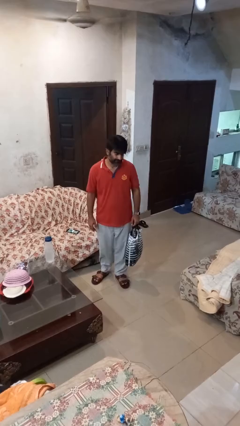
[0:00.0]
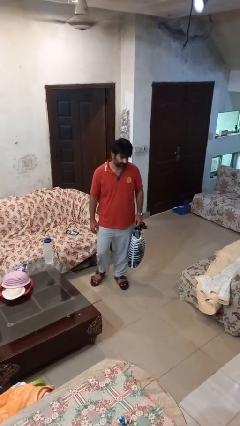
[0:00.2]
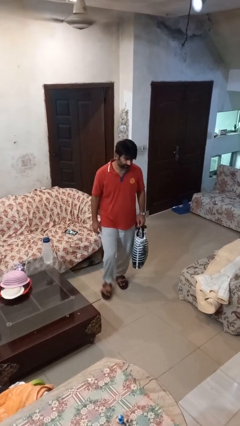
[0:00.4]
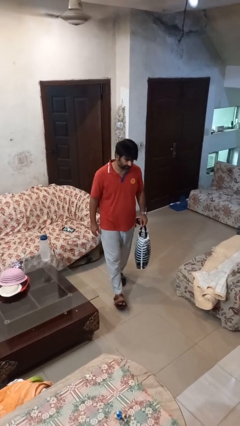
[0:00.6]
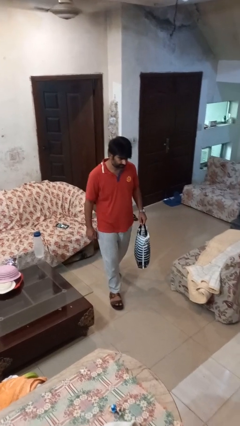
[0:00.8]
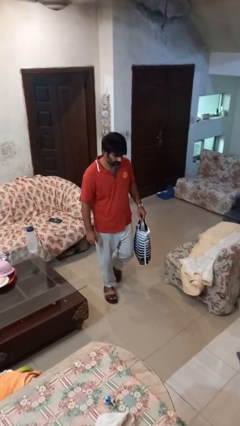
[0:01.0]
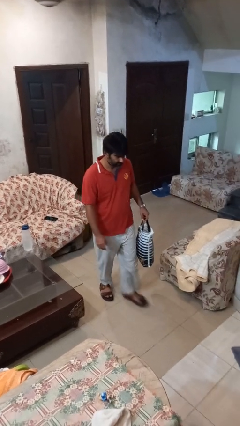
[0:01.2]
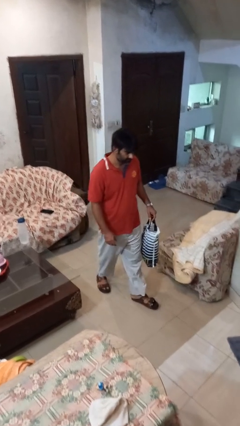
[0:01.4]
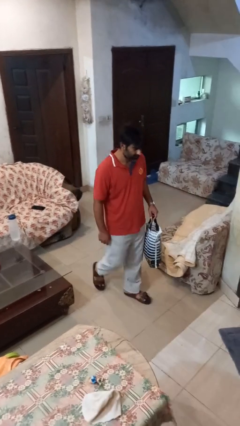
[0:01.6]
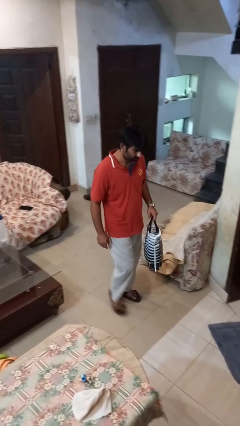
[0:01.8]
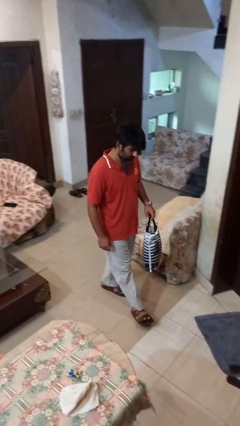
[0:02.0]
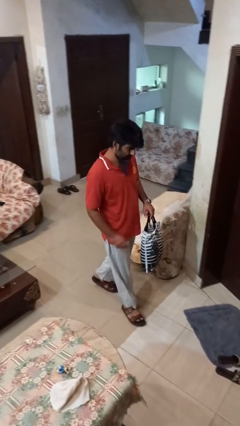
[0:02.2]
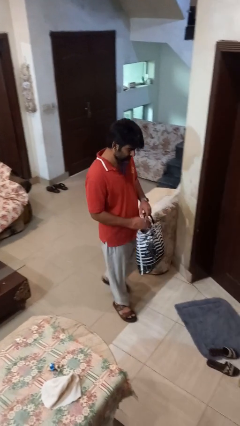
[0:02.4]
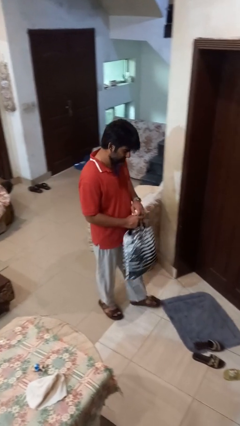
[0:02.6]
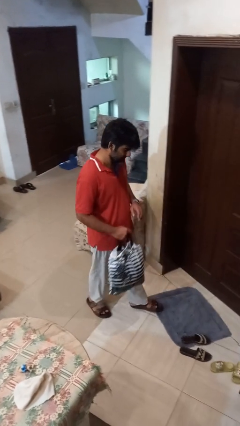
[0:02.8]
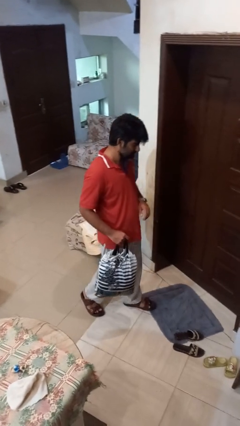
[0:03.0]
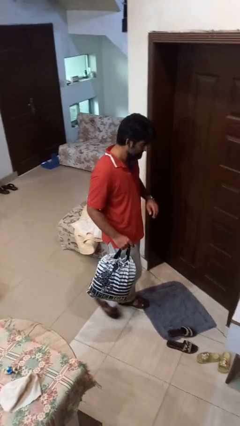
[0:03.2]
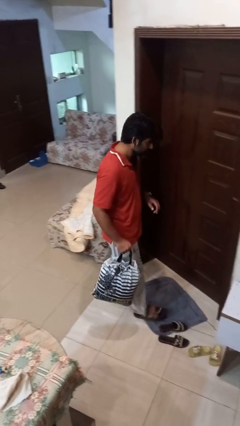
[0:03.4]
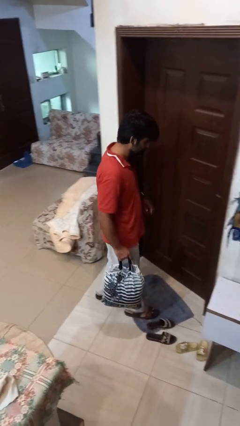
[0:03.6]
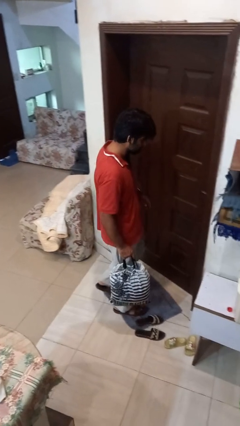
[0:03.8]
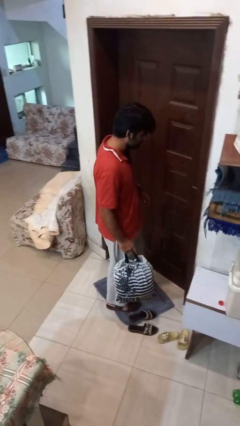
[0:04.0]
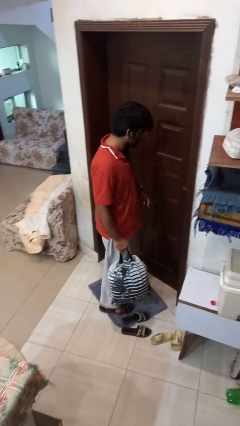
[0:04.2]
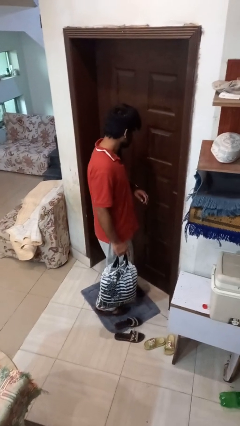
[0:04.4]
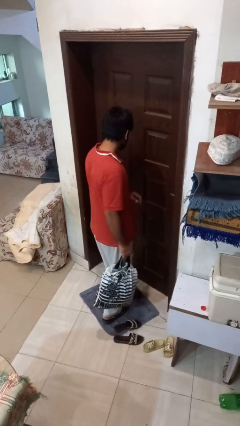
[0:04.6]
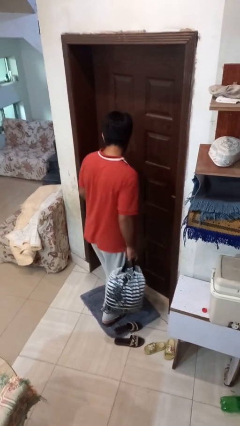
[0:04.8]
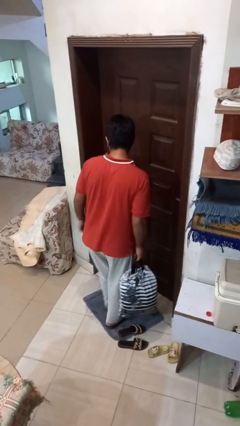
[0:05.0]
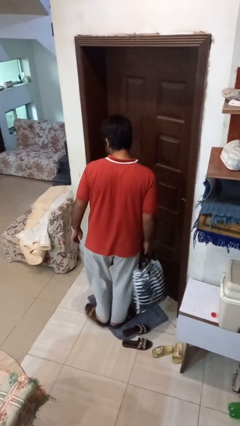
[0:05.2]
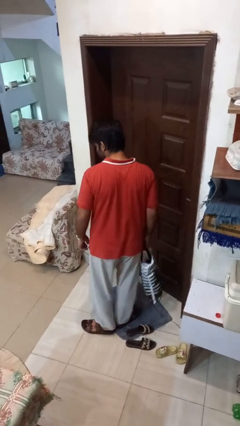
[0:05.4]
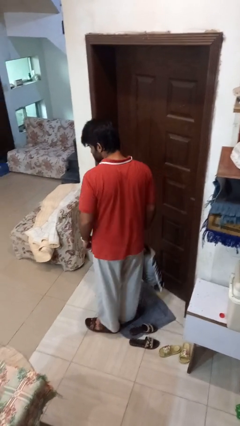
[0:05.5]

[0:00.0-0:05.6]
person carries groceries

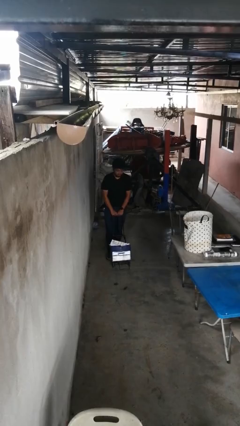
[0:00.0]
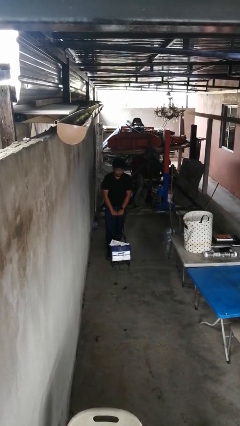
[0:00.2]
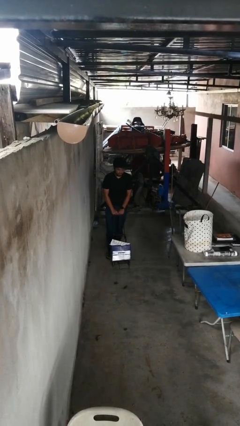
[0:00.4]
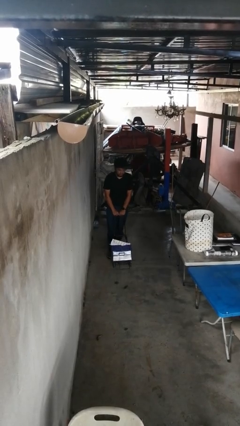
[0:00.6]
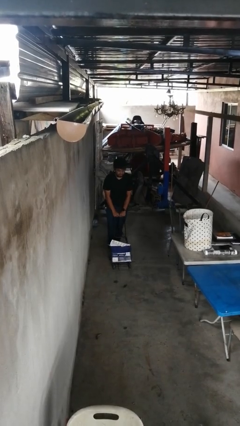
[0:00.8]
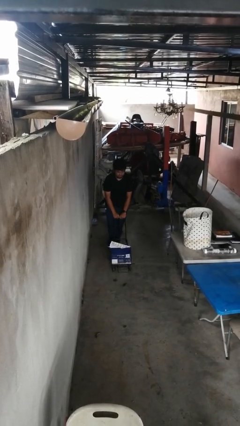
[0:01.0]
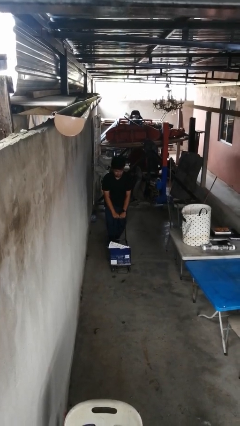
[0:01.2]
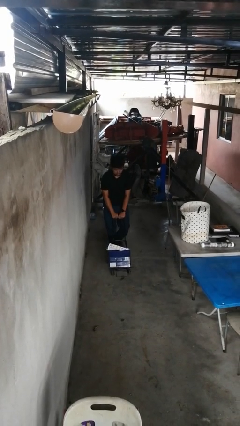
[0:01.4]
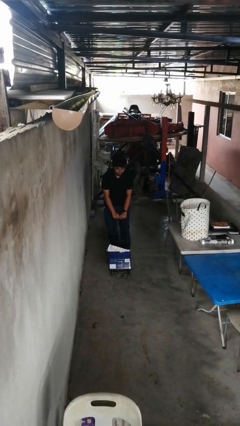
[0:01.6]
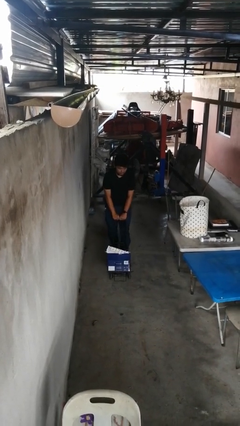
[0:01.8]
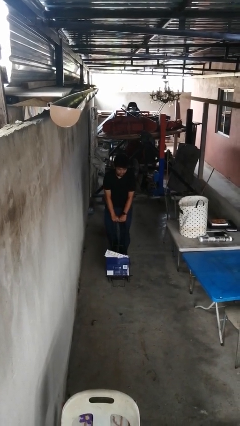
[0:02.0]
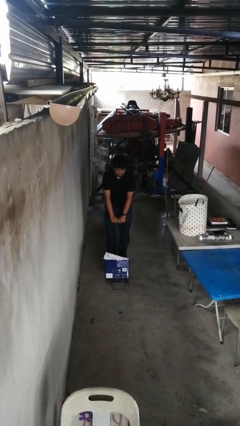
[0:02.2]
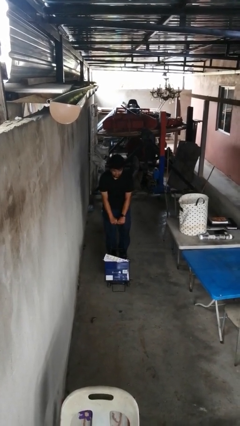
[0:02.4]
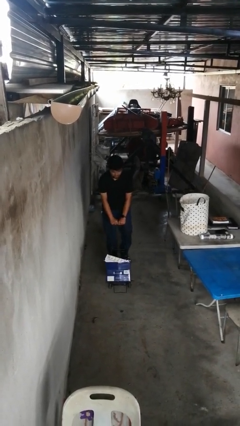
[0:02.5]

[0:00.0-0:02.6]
person pushes wheeled cart

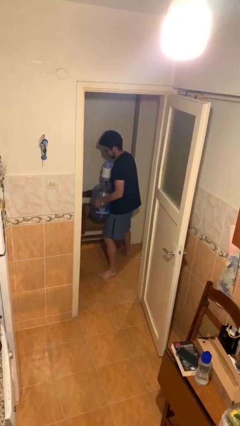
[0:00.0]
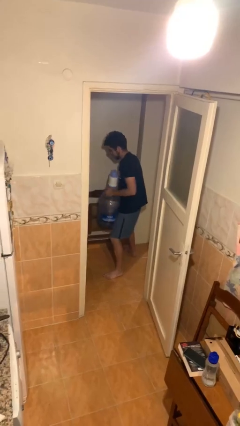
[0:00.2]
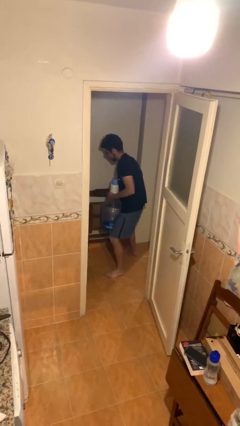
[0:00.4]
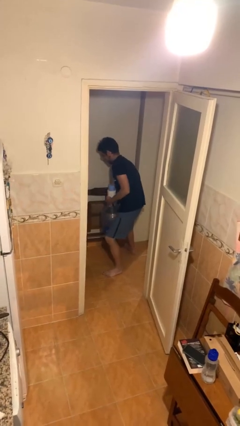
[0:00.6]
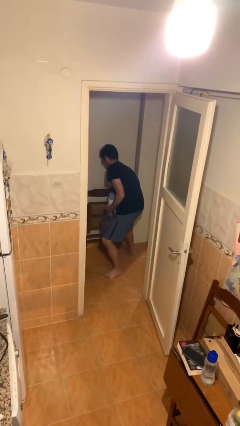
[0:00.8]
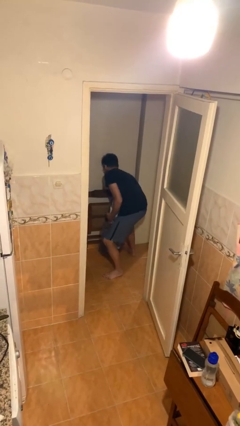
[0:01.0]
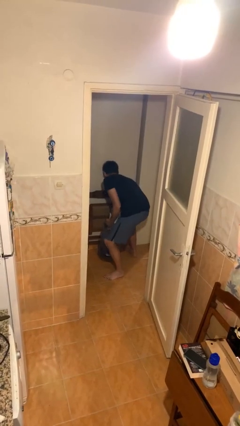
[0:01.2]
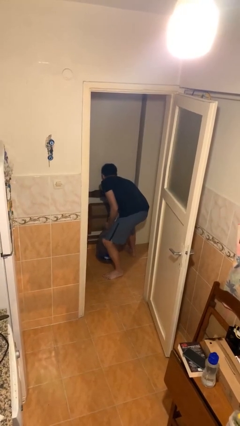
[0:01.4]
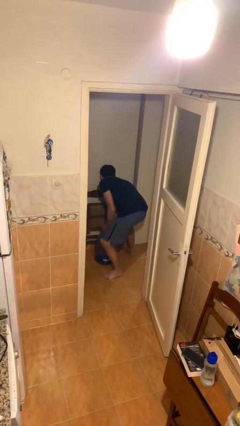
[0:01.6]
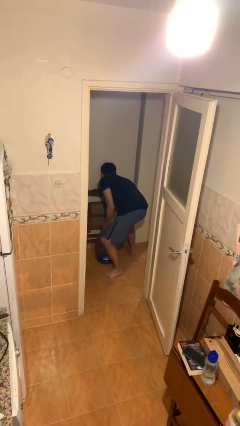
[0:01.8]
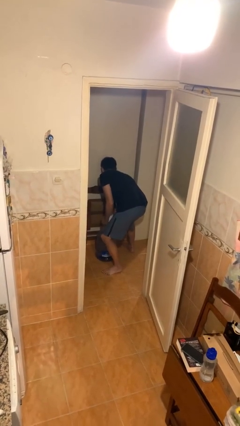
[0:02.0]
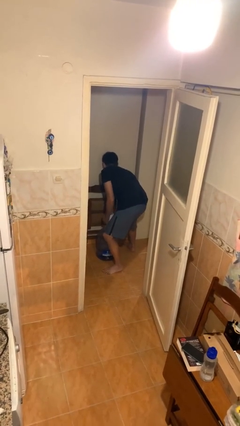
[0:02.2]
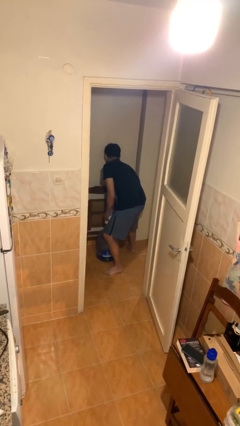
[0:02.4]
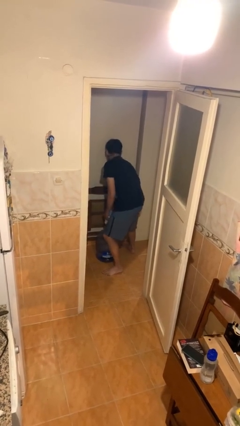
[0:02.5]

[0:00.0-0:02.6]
person puts down object on floor

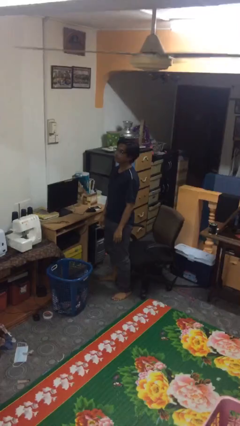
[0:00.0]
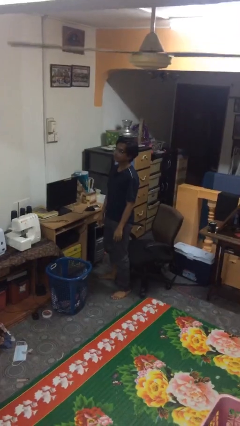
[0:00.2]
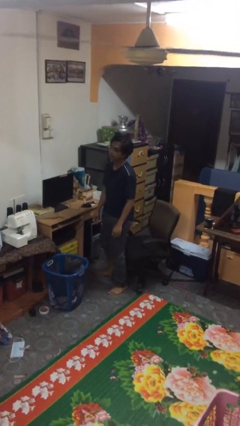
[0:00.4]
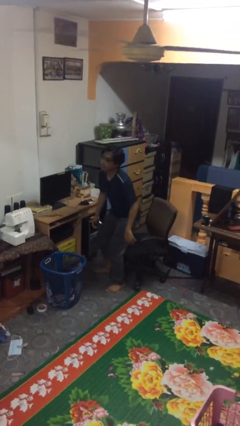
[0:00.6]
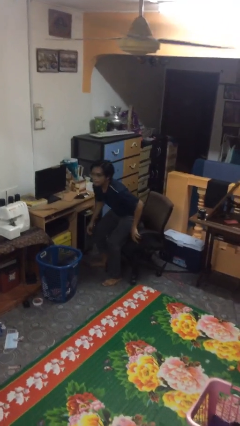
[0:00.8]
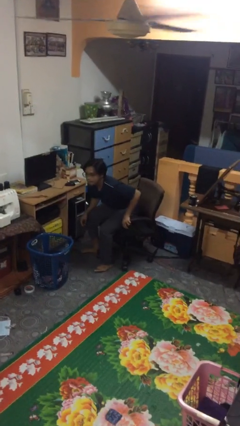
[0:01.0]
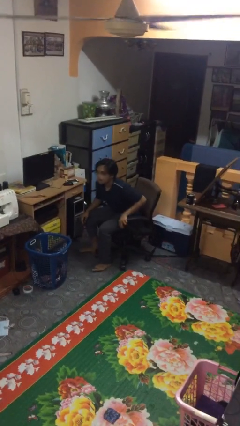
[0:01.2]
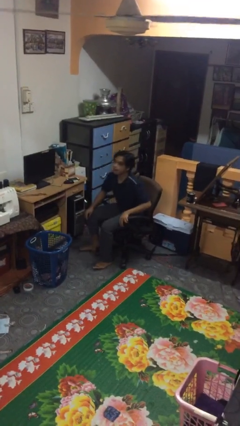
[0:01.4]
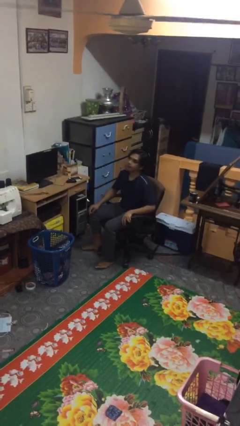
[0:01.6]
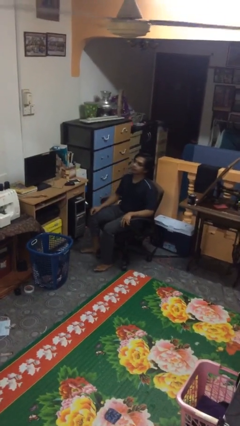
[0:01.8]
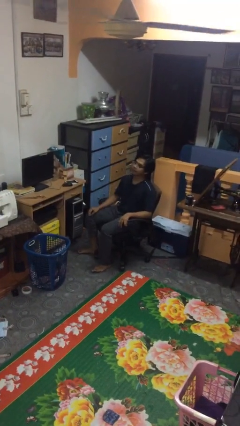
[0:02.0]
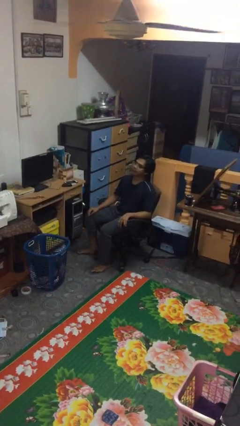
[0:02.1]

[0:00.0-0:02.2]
person sits down

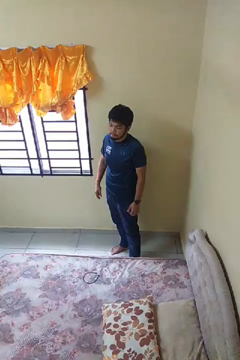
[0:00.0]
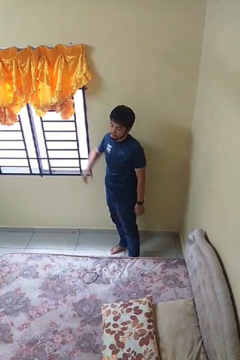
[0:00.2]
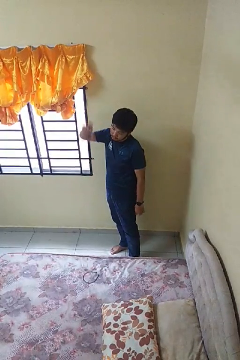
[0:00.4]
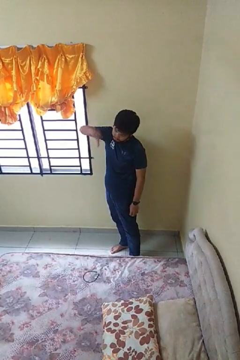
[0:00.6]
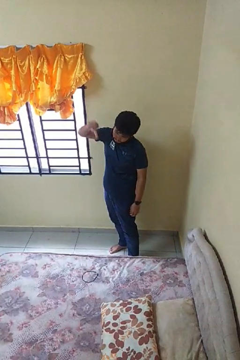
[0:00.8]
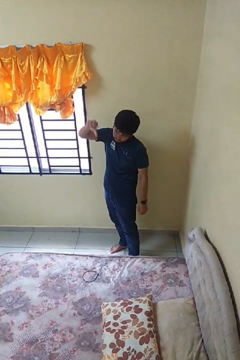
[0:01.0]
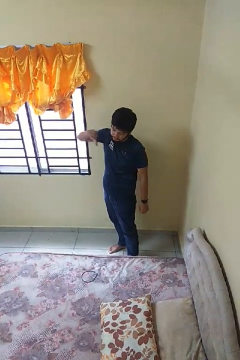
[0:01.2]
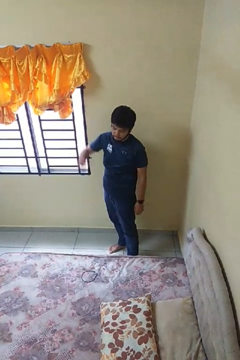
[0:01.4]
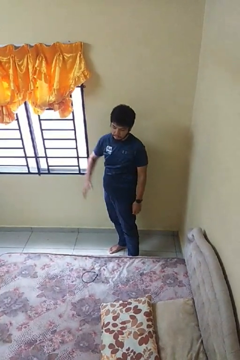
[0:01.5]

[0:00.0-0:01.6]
person gestures thumbs down

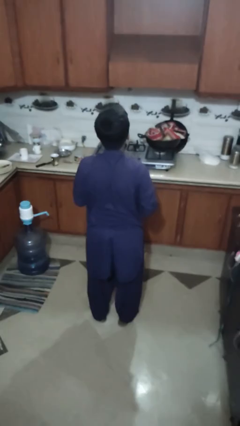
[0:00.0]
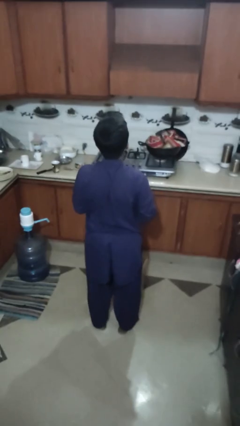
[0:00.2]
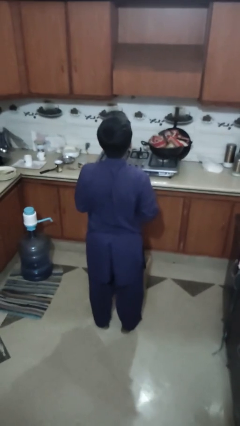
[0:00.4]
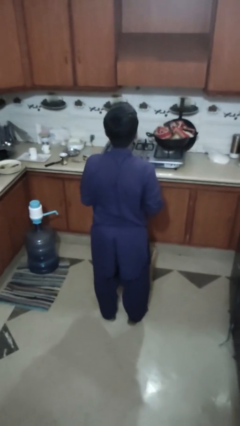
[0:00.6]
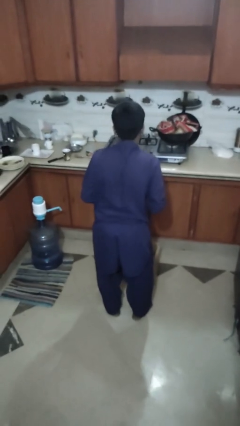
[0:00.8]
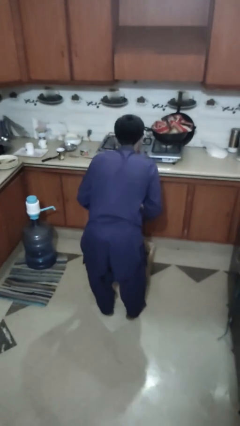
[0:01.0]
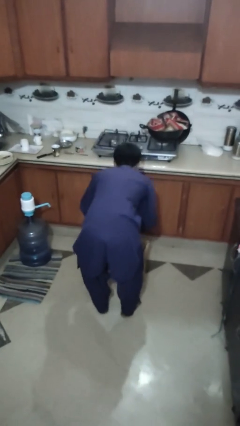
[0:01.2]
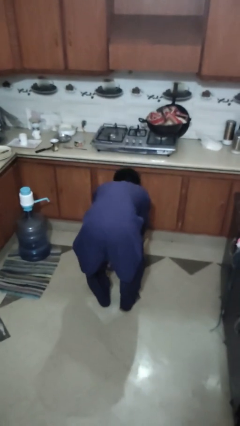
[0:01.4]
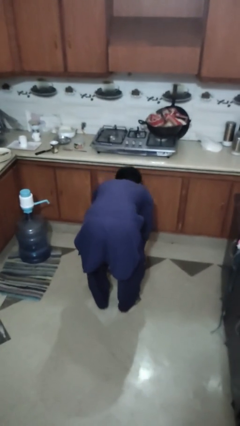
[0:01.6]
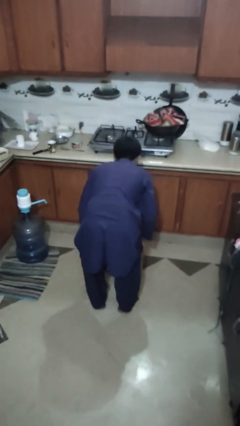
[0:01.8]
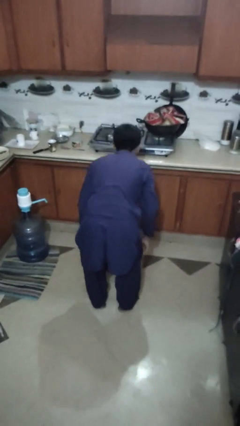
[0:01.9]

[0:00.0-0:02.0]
person puts object into box

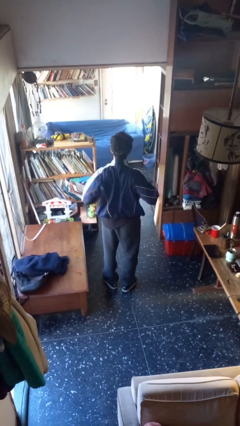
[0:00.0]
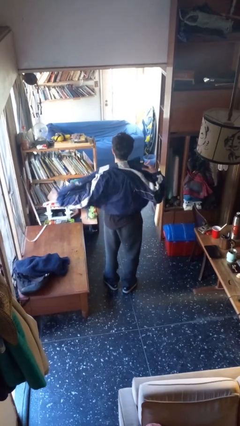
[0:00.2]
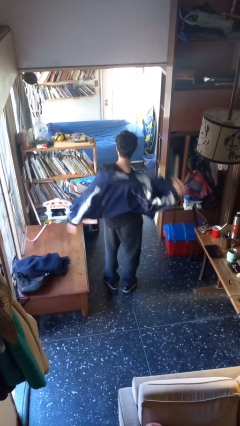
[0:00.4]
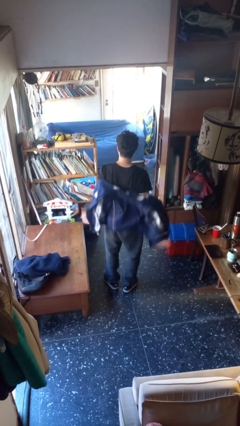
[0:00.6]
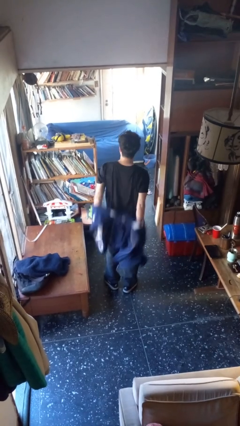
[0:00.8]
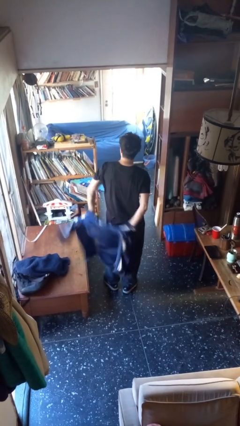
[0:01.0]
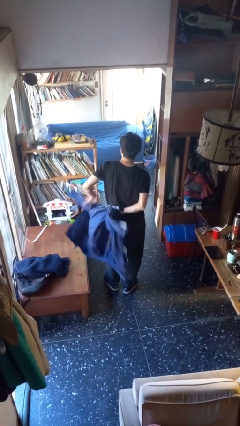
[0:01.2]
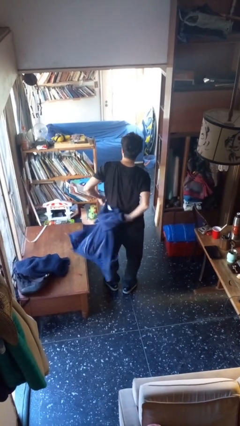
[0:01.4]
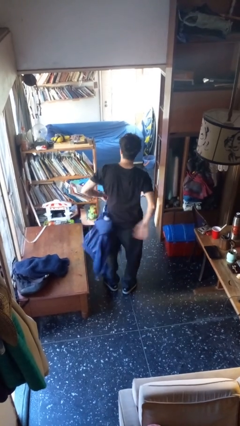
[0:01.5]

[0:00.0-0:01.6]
person takes off jacket
